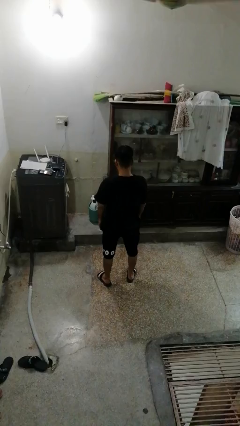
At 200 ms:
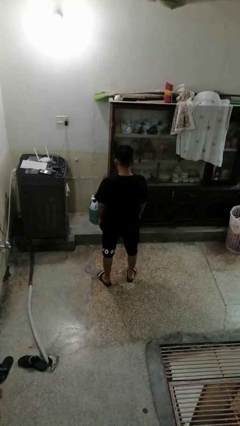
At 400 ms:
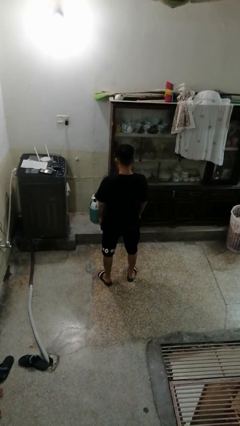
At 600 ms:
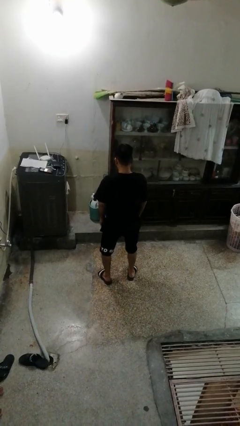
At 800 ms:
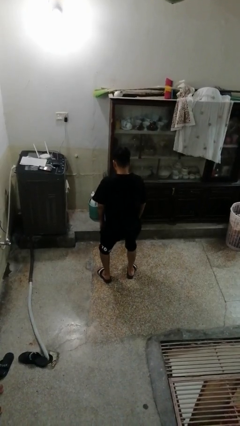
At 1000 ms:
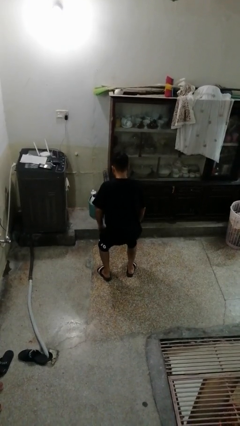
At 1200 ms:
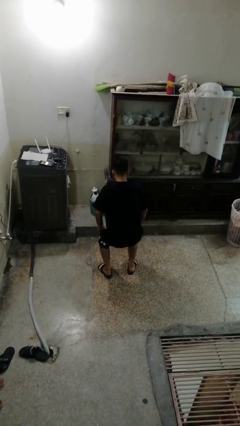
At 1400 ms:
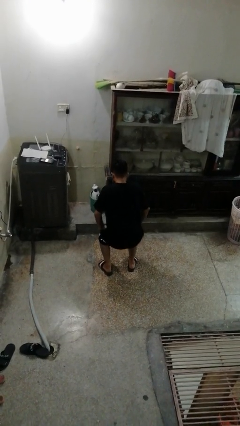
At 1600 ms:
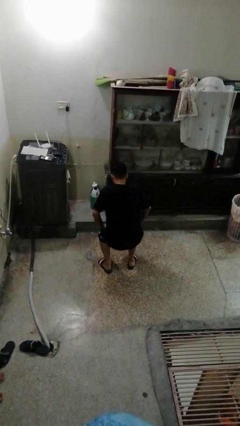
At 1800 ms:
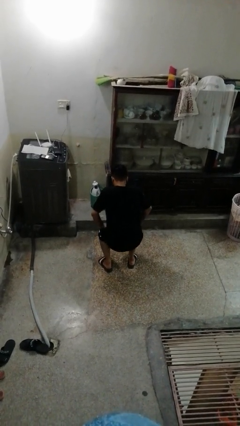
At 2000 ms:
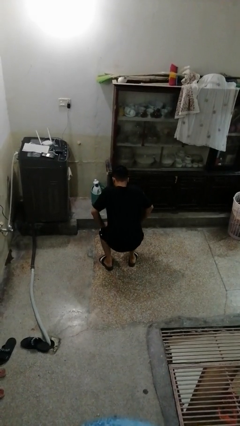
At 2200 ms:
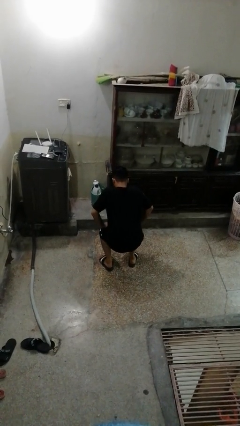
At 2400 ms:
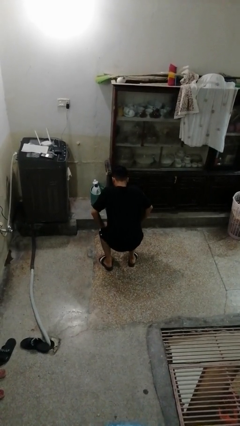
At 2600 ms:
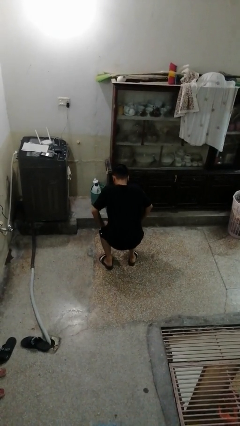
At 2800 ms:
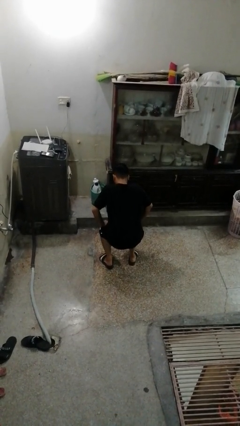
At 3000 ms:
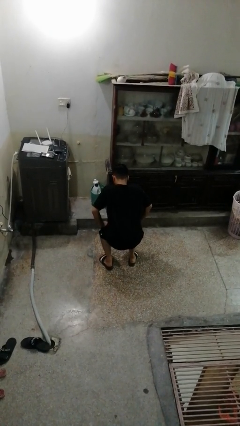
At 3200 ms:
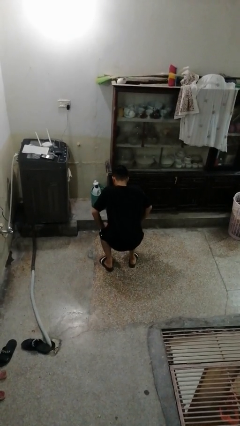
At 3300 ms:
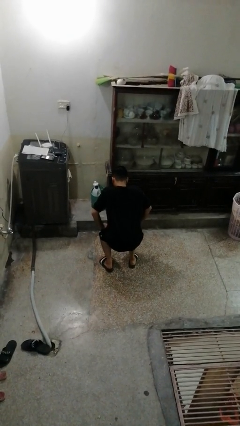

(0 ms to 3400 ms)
person squats

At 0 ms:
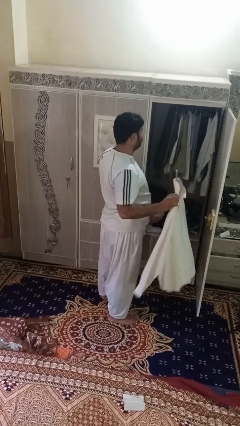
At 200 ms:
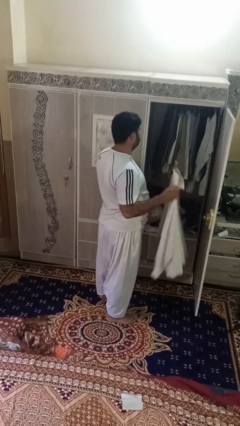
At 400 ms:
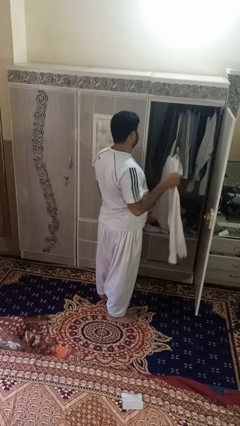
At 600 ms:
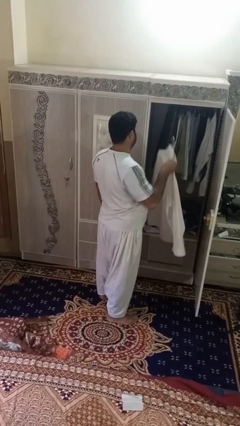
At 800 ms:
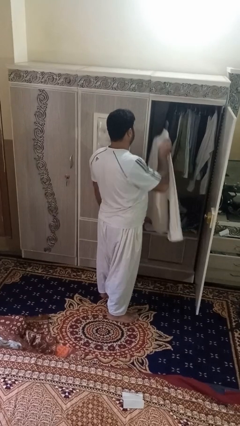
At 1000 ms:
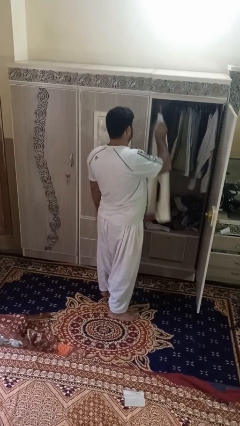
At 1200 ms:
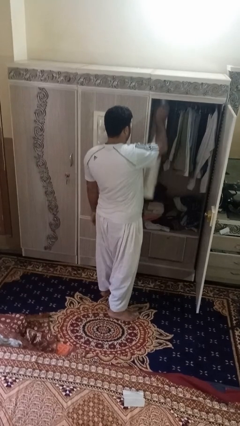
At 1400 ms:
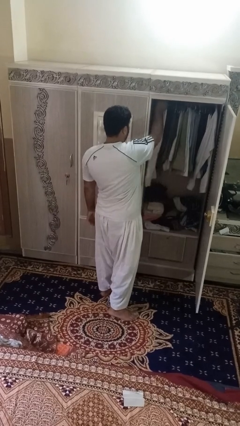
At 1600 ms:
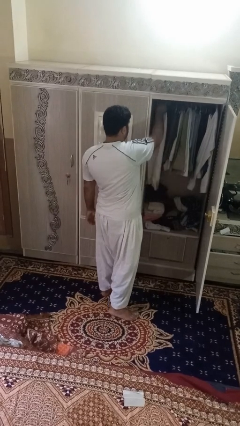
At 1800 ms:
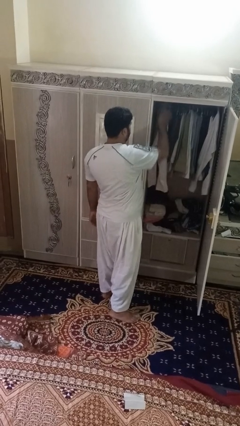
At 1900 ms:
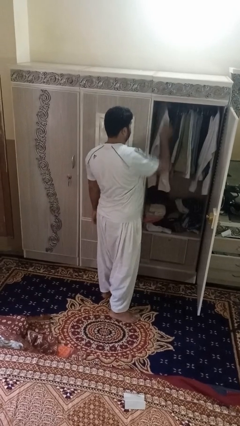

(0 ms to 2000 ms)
person puts clothes into closet

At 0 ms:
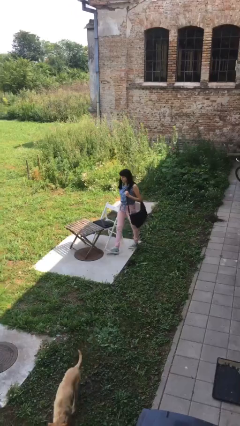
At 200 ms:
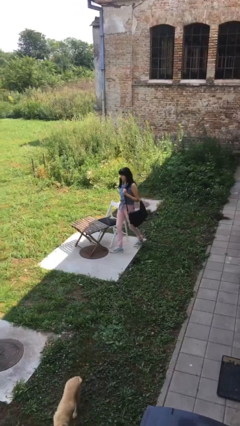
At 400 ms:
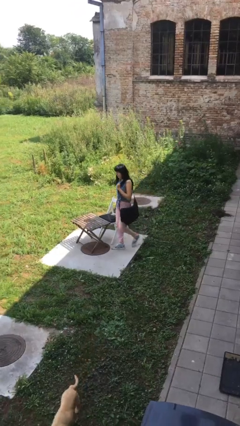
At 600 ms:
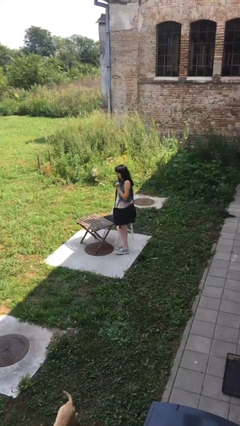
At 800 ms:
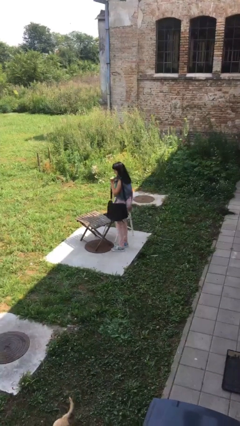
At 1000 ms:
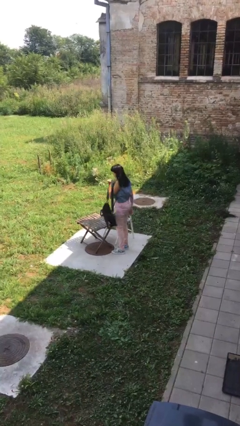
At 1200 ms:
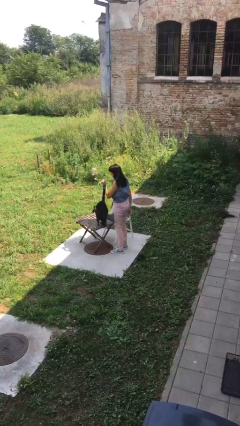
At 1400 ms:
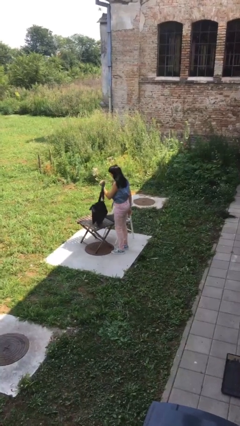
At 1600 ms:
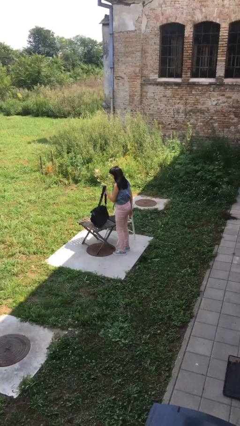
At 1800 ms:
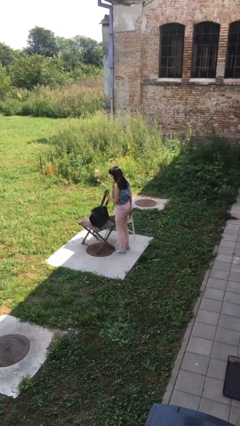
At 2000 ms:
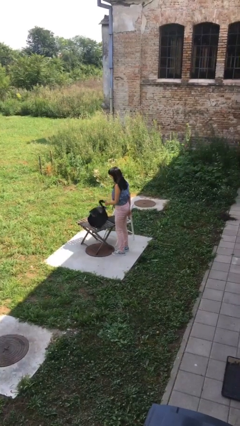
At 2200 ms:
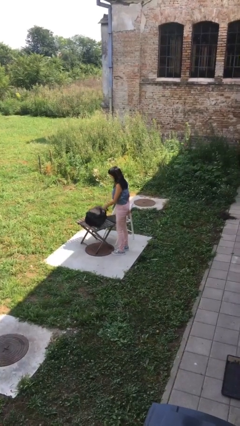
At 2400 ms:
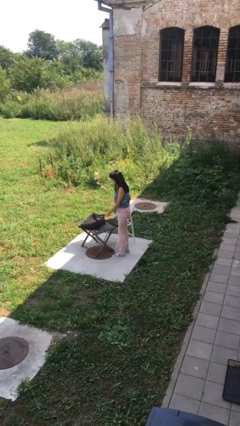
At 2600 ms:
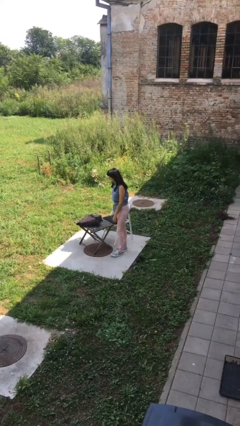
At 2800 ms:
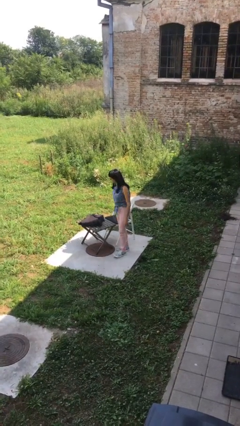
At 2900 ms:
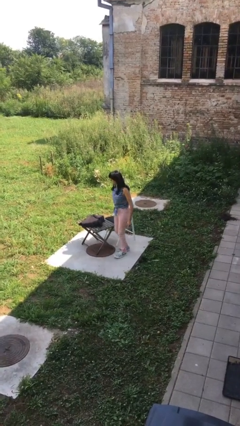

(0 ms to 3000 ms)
person puts down object on table

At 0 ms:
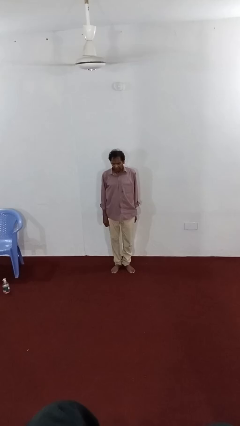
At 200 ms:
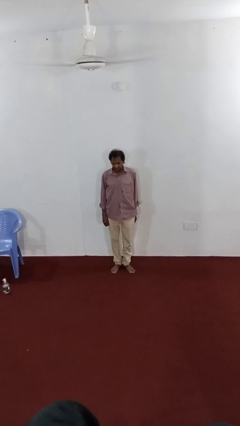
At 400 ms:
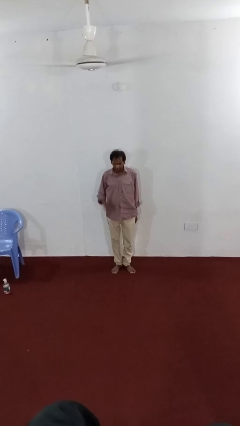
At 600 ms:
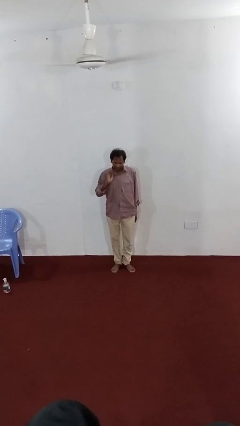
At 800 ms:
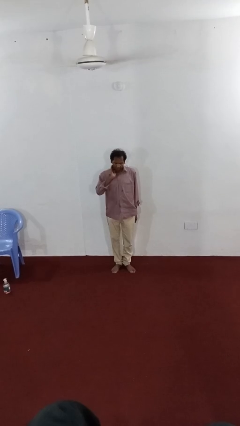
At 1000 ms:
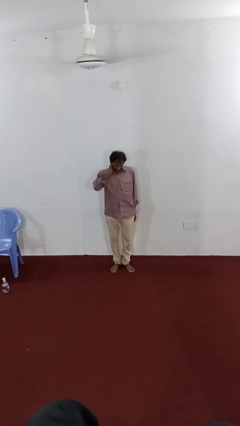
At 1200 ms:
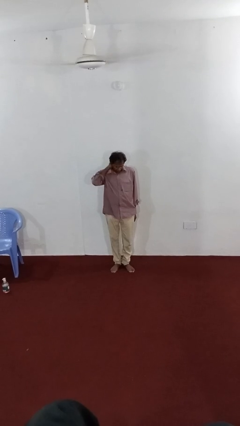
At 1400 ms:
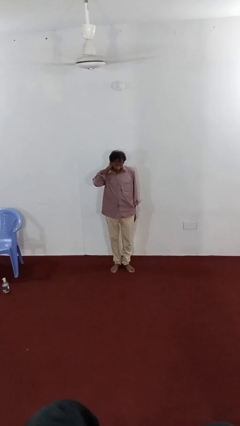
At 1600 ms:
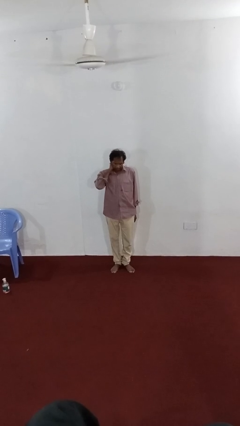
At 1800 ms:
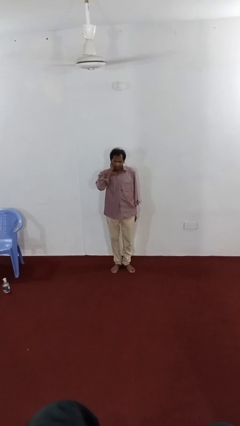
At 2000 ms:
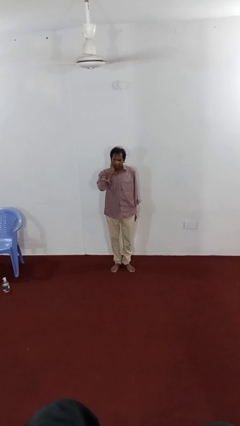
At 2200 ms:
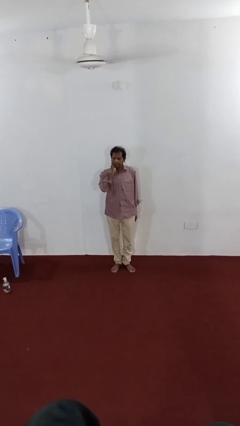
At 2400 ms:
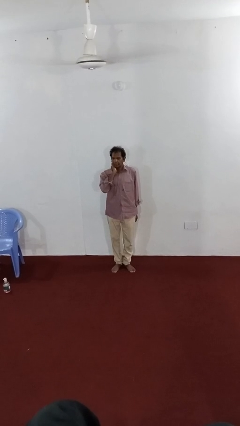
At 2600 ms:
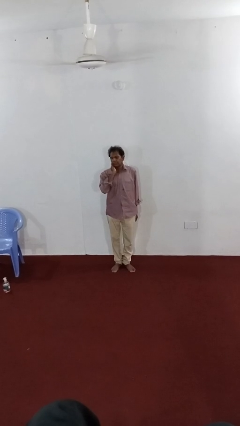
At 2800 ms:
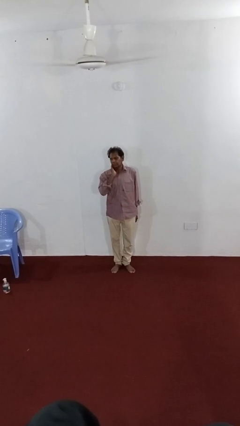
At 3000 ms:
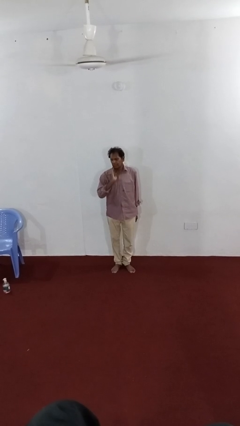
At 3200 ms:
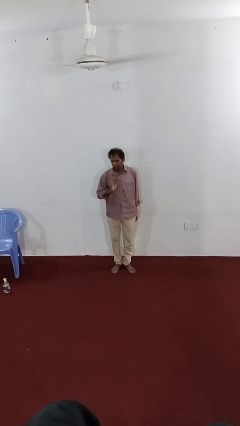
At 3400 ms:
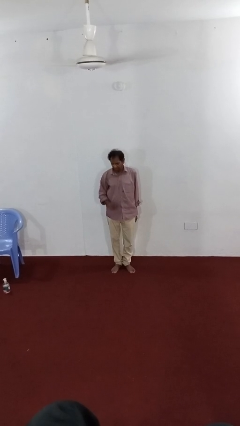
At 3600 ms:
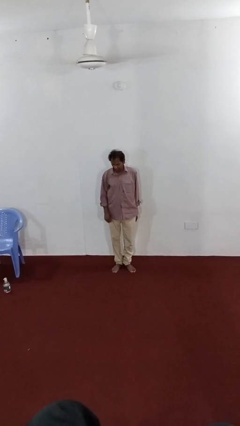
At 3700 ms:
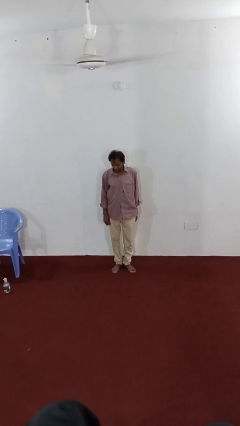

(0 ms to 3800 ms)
person rubs neck

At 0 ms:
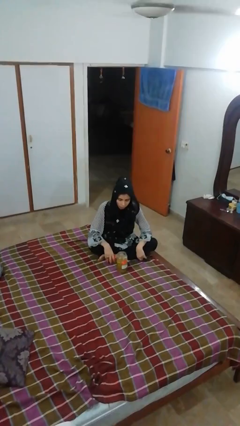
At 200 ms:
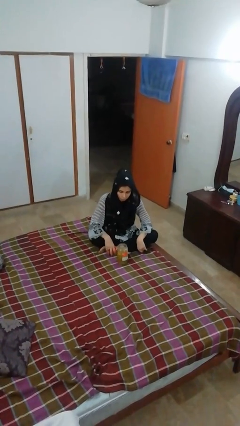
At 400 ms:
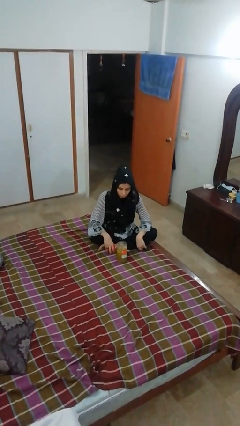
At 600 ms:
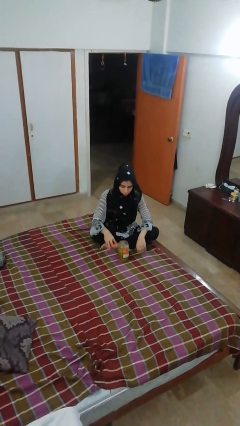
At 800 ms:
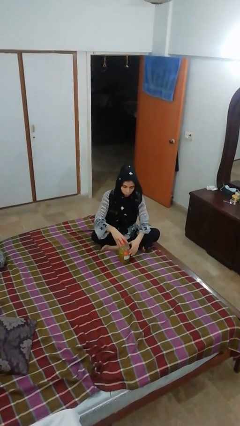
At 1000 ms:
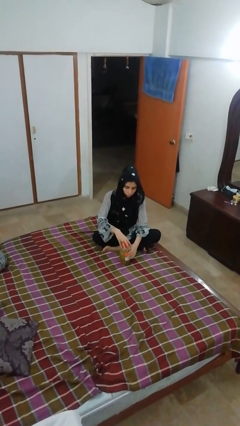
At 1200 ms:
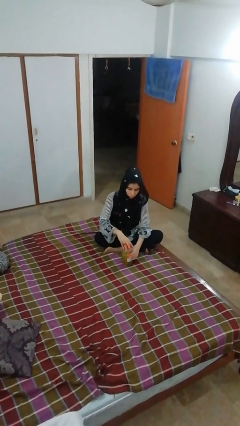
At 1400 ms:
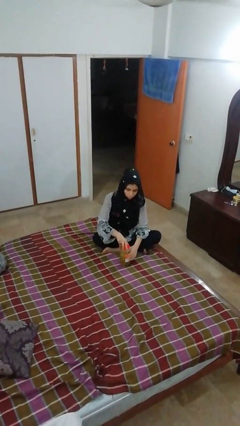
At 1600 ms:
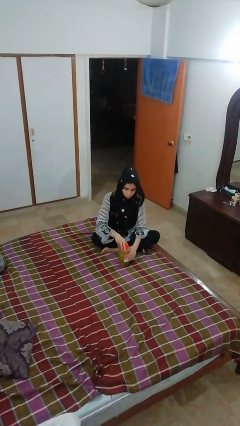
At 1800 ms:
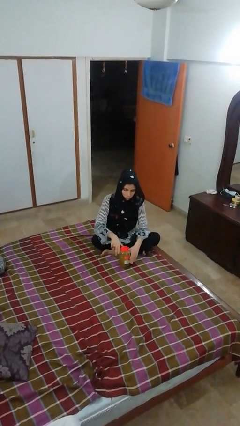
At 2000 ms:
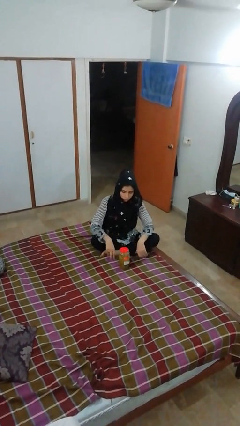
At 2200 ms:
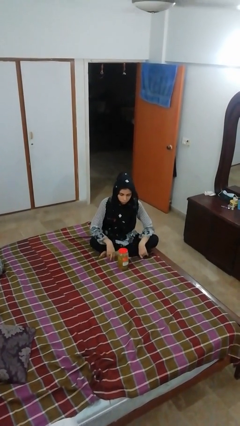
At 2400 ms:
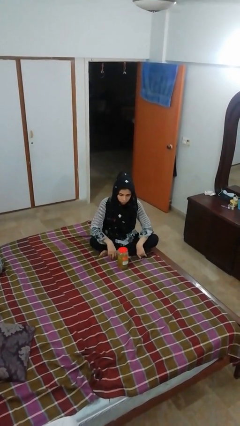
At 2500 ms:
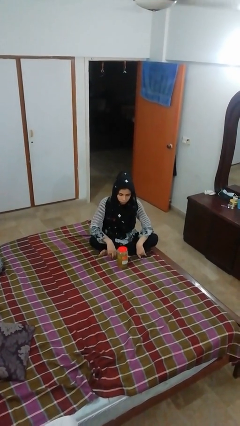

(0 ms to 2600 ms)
person closes jar

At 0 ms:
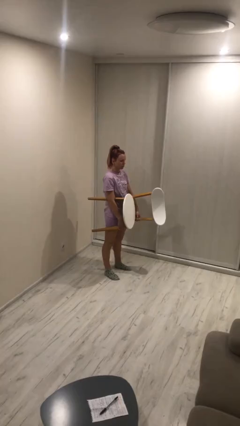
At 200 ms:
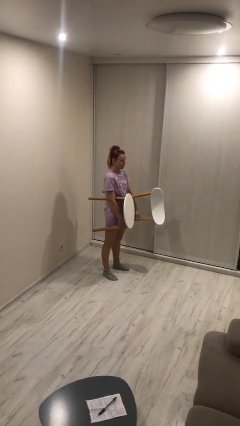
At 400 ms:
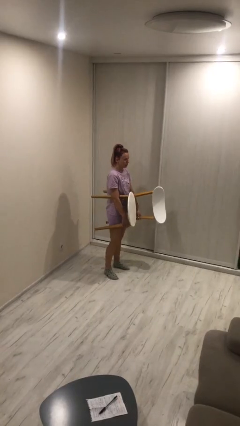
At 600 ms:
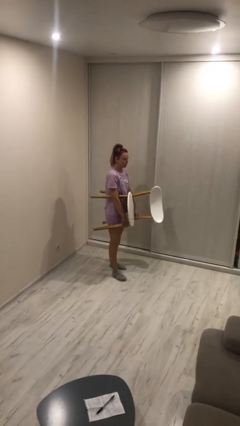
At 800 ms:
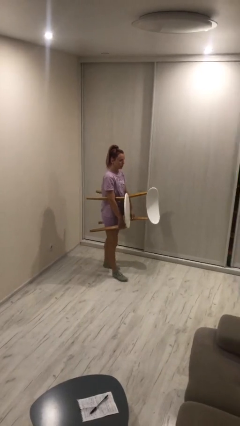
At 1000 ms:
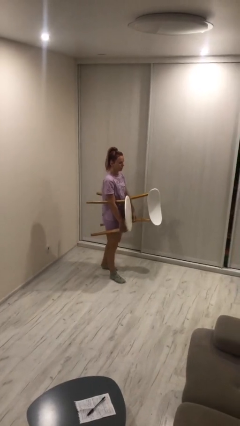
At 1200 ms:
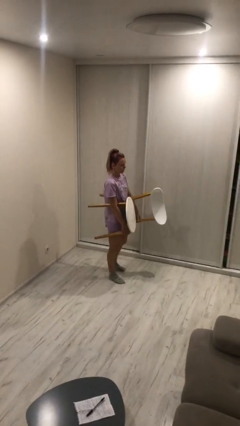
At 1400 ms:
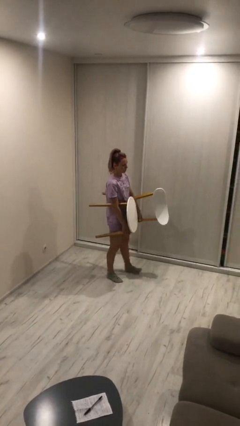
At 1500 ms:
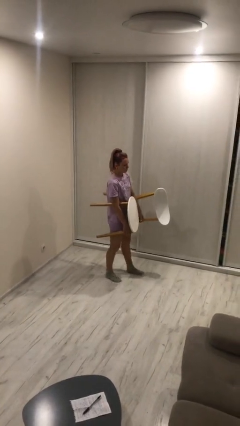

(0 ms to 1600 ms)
person carries furniture

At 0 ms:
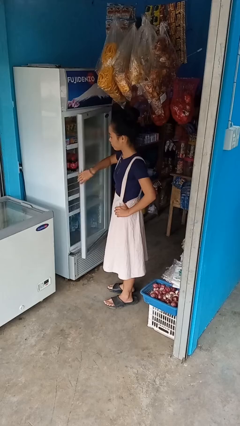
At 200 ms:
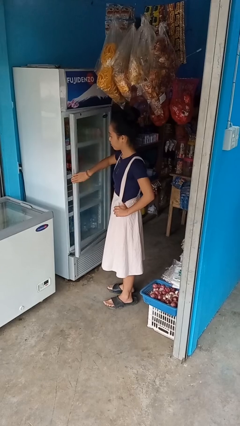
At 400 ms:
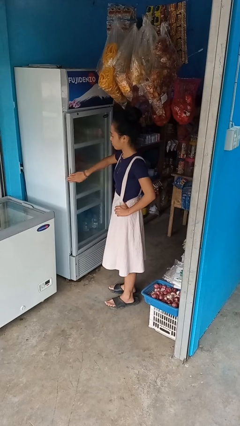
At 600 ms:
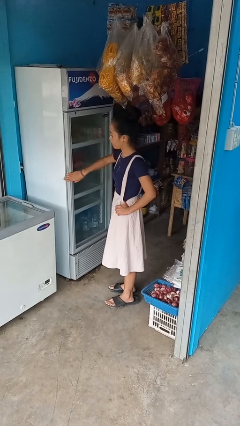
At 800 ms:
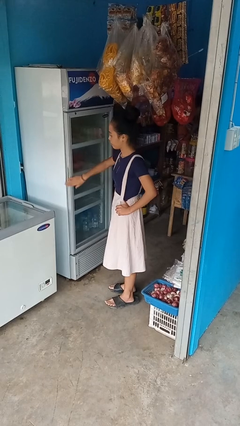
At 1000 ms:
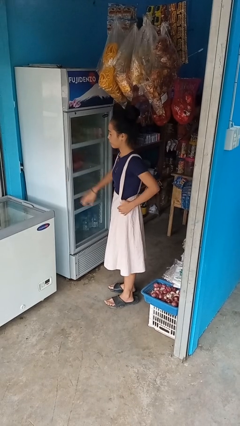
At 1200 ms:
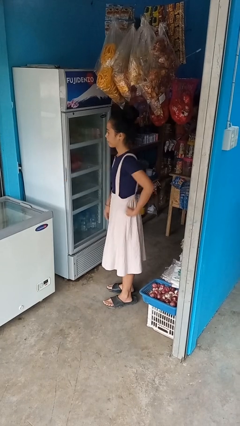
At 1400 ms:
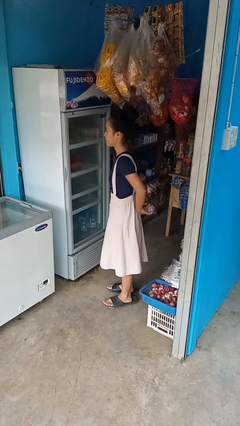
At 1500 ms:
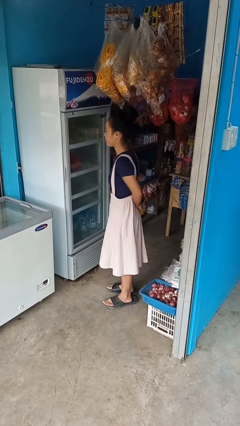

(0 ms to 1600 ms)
person closes refrigerator
